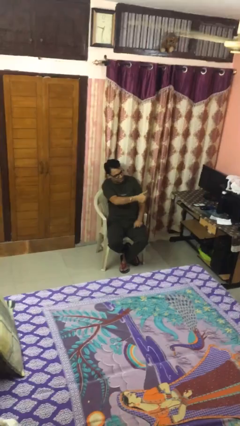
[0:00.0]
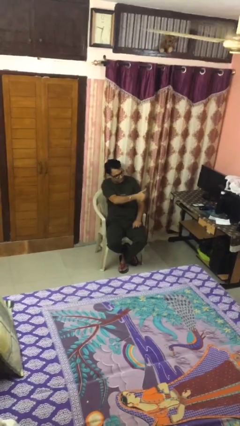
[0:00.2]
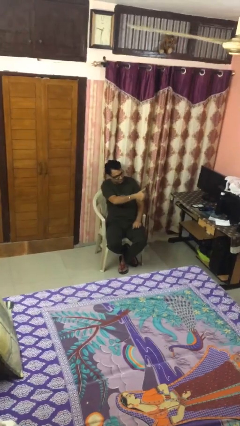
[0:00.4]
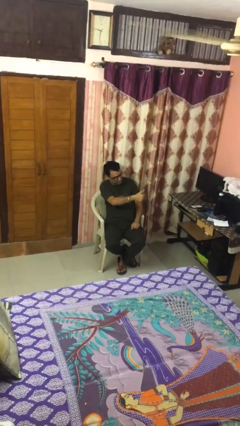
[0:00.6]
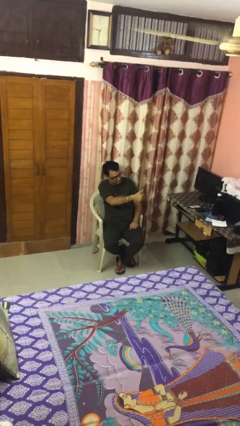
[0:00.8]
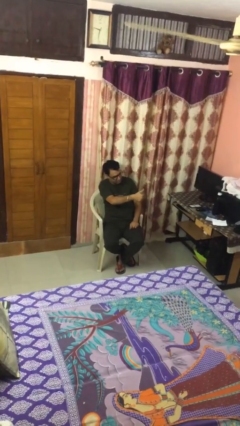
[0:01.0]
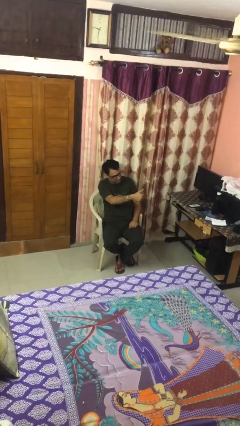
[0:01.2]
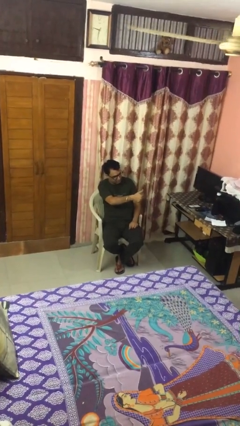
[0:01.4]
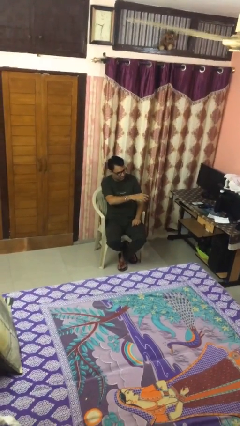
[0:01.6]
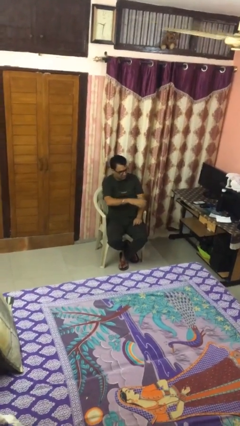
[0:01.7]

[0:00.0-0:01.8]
person gestures thumbs up

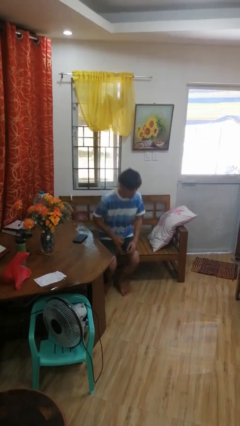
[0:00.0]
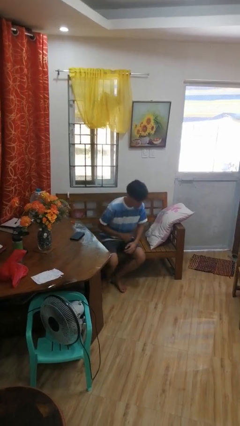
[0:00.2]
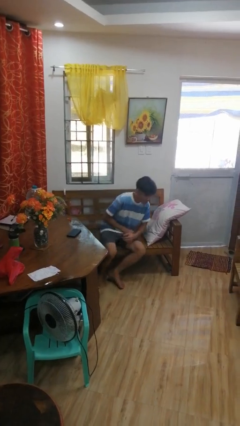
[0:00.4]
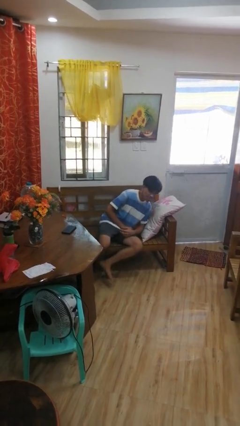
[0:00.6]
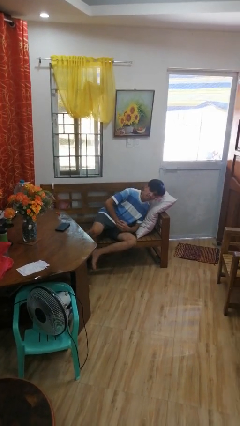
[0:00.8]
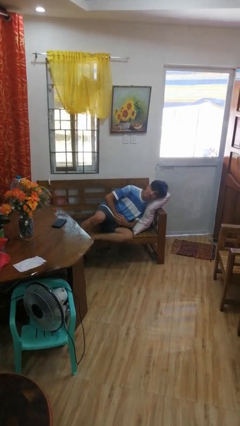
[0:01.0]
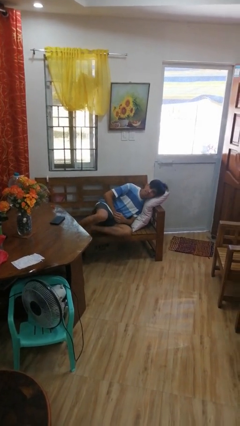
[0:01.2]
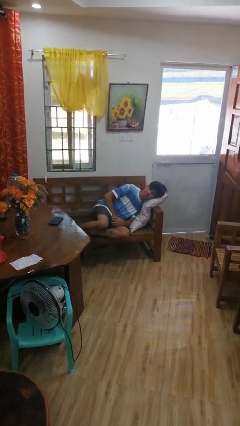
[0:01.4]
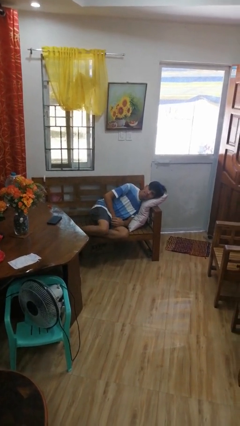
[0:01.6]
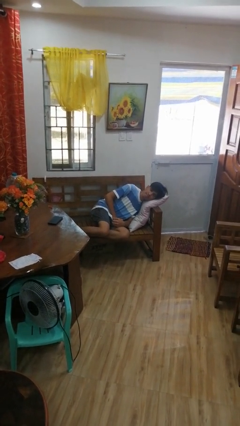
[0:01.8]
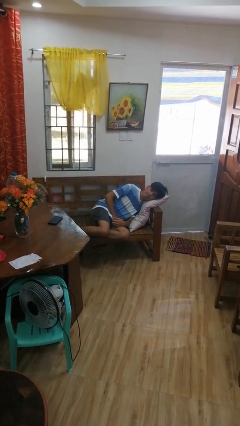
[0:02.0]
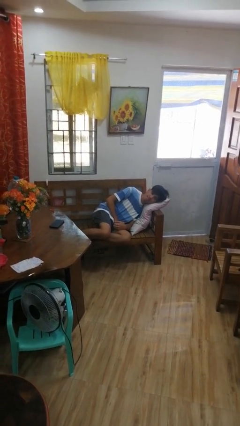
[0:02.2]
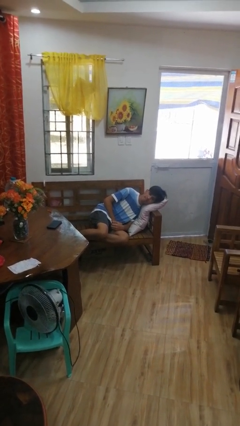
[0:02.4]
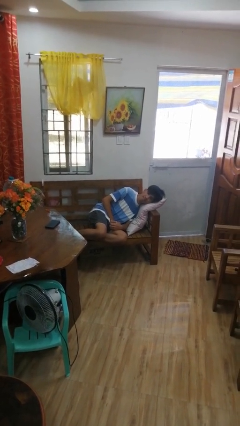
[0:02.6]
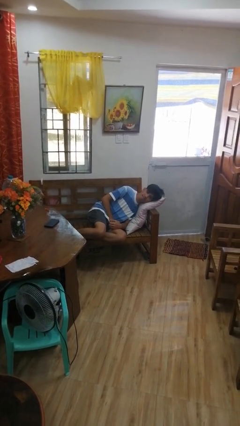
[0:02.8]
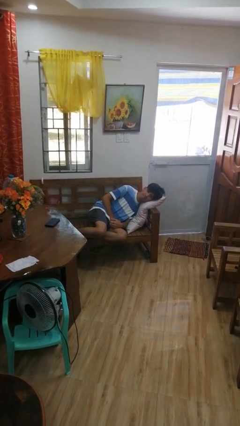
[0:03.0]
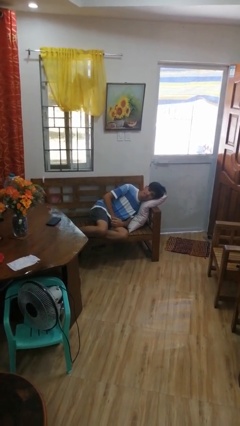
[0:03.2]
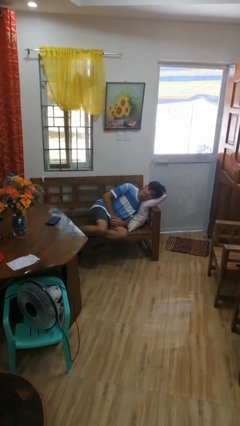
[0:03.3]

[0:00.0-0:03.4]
person lies down on couch

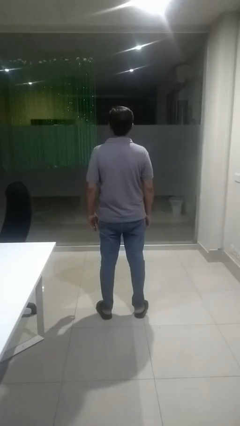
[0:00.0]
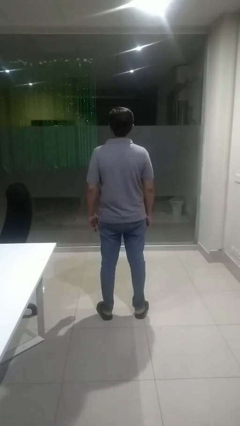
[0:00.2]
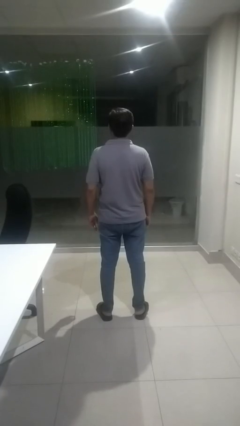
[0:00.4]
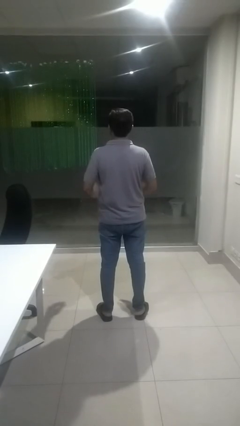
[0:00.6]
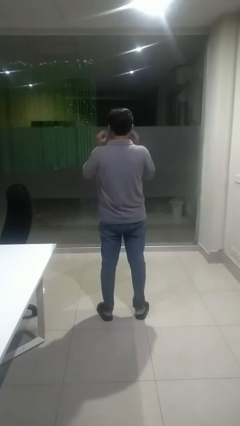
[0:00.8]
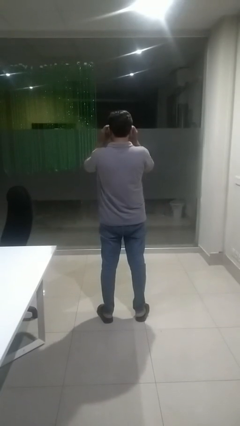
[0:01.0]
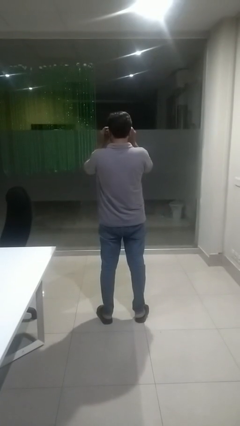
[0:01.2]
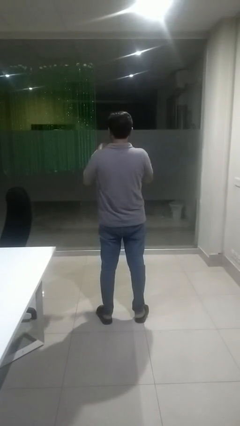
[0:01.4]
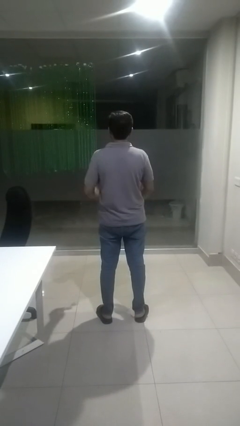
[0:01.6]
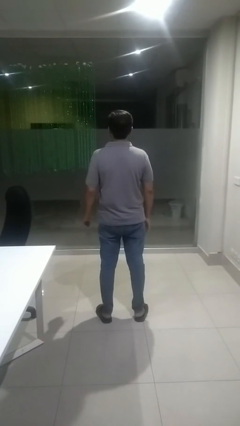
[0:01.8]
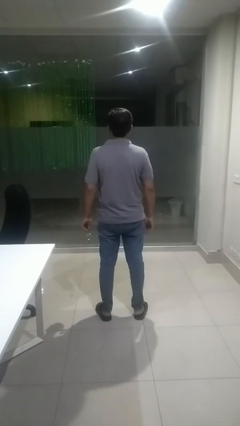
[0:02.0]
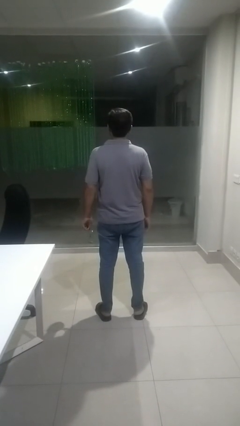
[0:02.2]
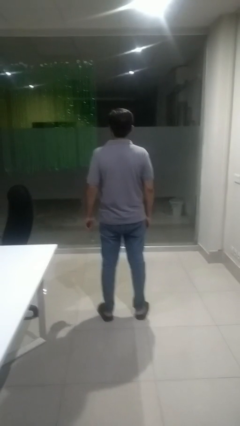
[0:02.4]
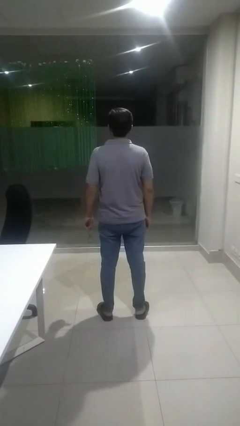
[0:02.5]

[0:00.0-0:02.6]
person takes off glasses

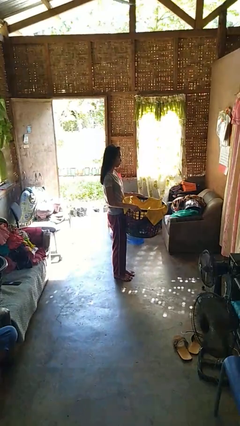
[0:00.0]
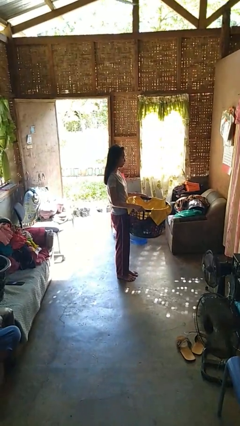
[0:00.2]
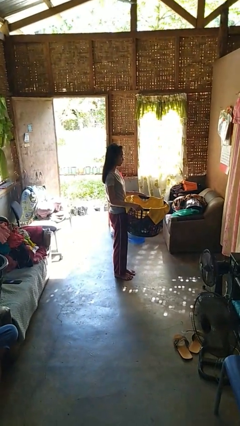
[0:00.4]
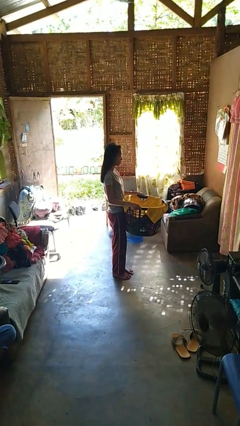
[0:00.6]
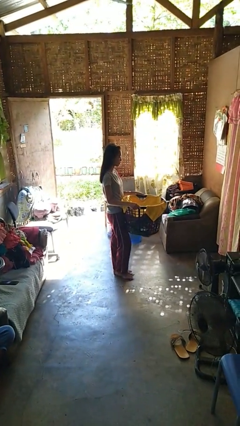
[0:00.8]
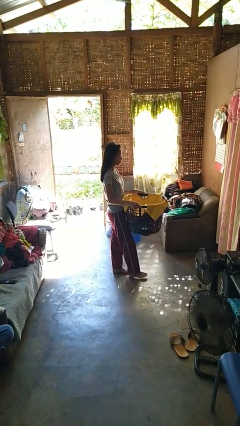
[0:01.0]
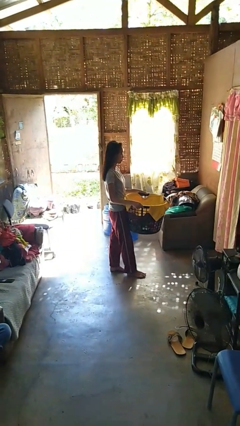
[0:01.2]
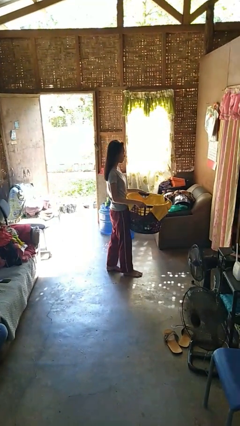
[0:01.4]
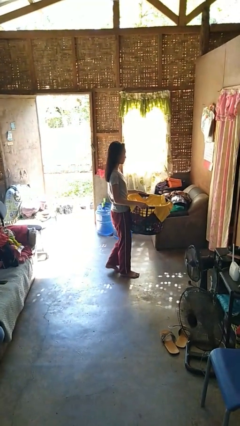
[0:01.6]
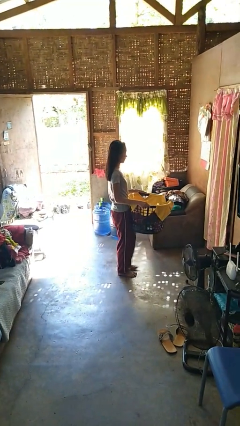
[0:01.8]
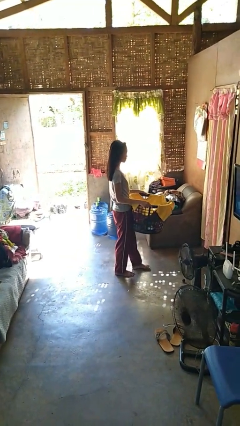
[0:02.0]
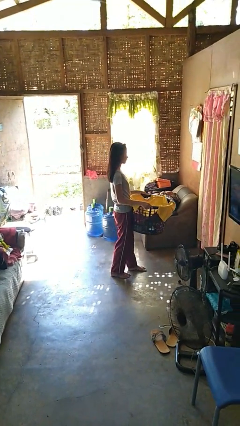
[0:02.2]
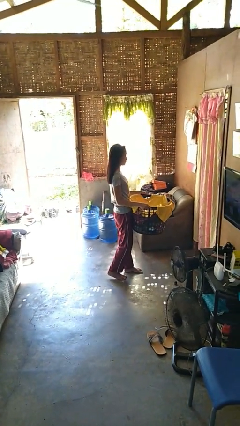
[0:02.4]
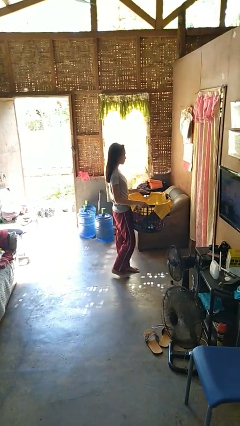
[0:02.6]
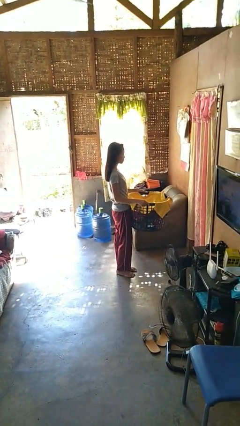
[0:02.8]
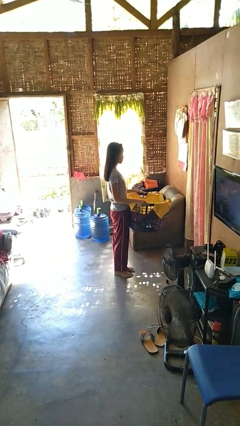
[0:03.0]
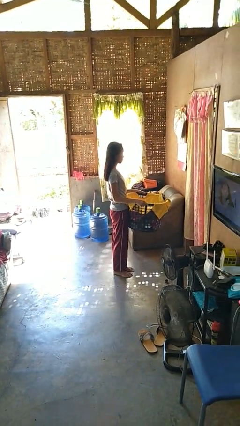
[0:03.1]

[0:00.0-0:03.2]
person carries laundry basket

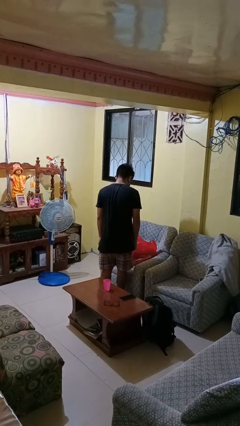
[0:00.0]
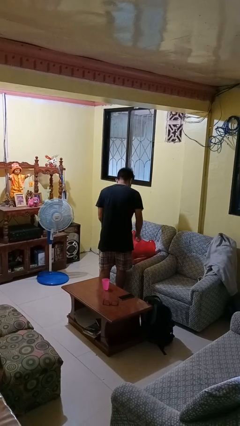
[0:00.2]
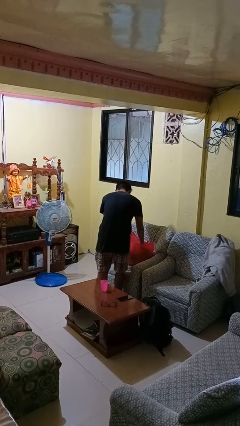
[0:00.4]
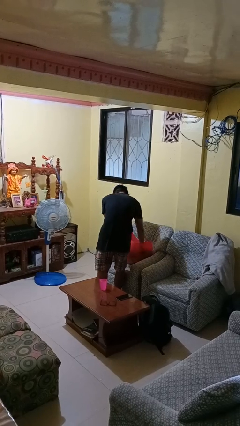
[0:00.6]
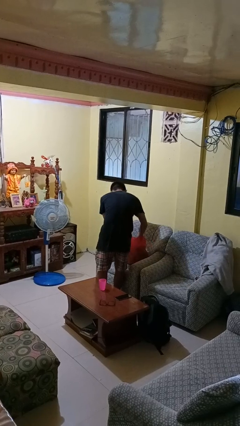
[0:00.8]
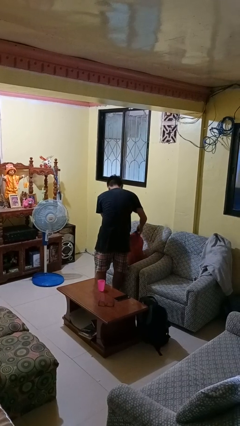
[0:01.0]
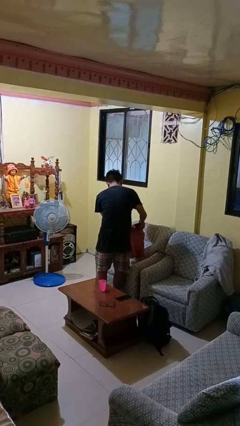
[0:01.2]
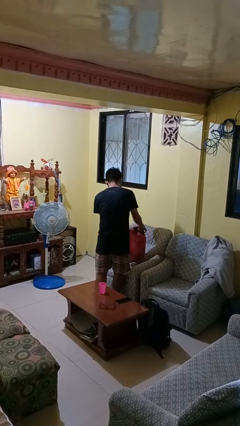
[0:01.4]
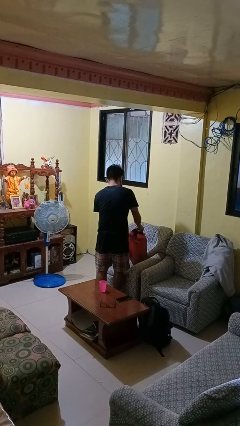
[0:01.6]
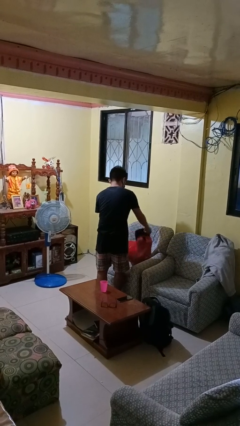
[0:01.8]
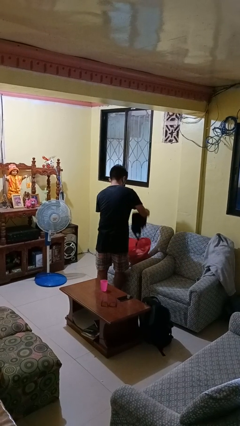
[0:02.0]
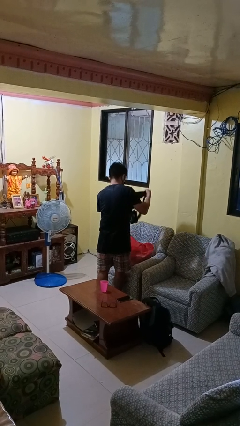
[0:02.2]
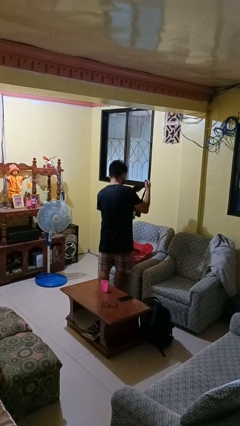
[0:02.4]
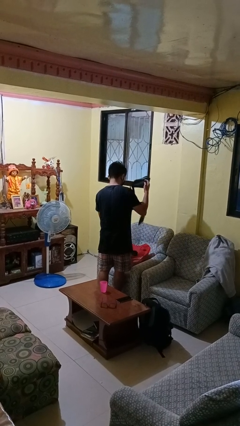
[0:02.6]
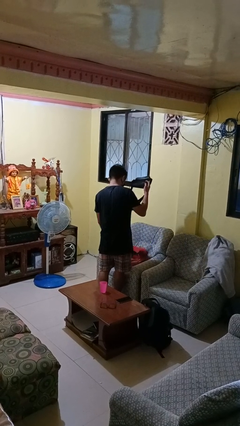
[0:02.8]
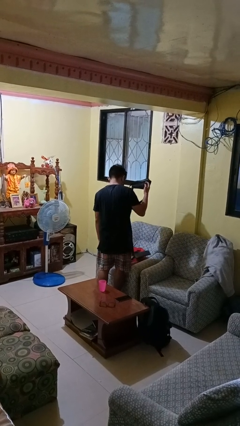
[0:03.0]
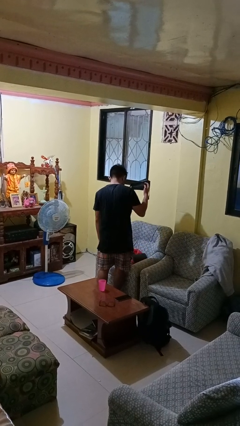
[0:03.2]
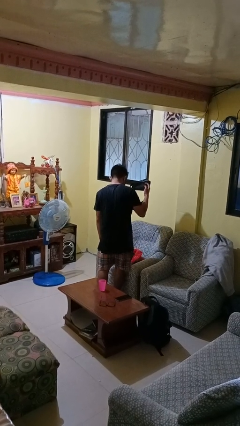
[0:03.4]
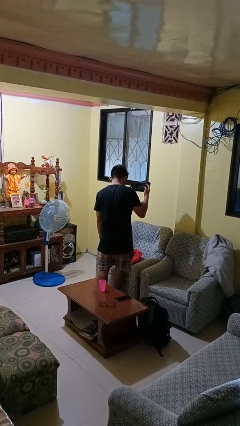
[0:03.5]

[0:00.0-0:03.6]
person takes object from bag

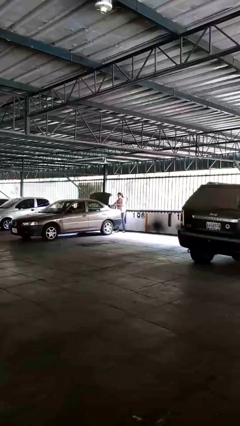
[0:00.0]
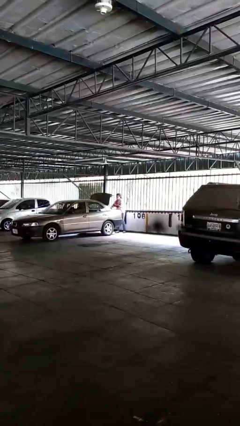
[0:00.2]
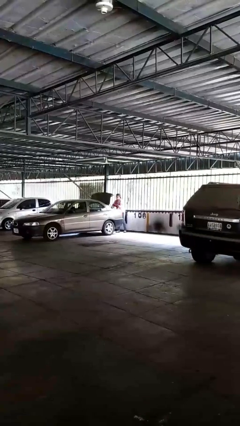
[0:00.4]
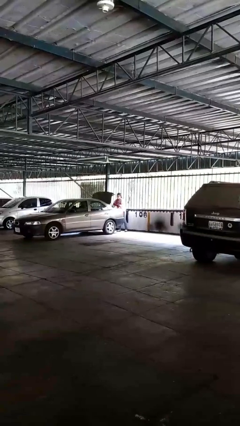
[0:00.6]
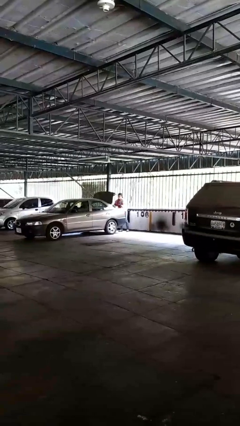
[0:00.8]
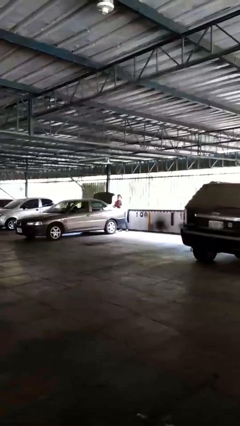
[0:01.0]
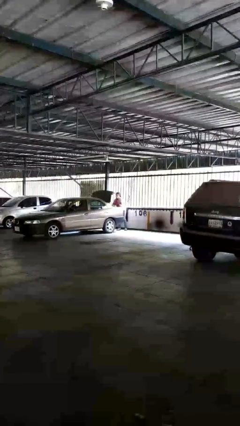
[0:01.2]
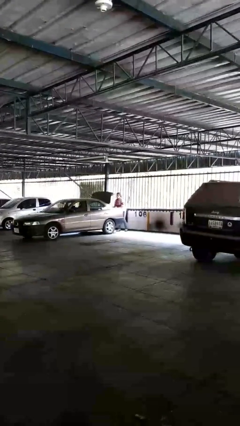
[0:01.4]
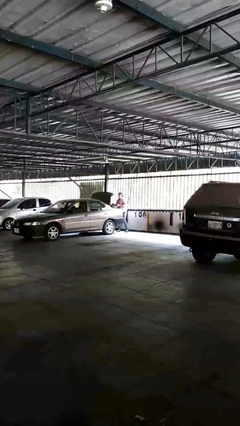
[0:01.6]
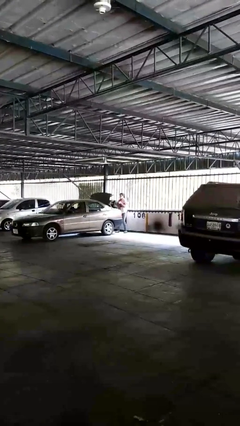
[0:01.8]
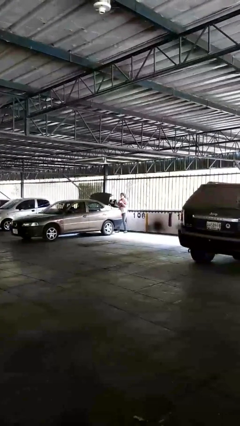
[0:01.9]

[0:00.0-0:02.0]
person loads car

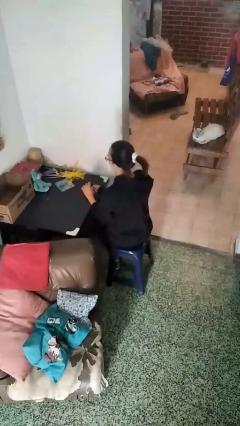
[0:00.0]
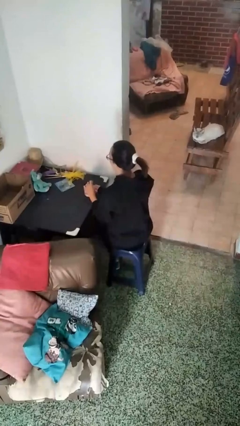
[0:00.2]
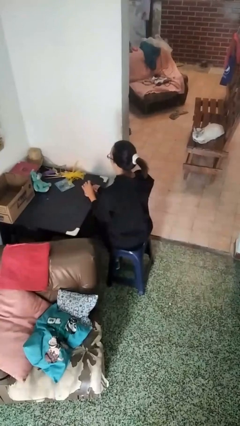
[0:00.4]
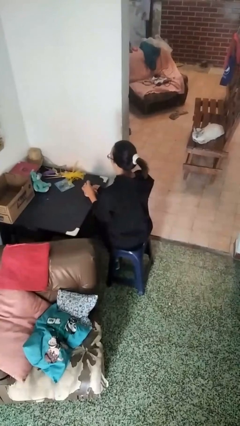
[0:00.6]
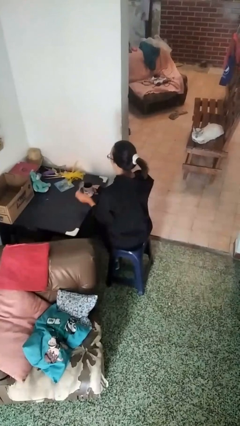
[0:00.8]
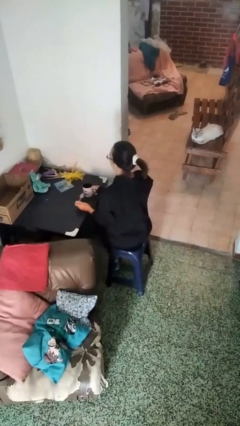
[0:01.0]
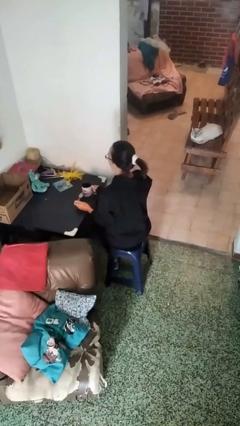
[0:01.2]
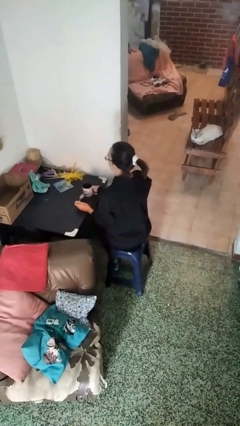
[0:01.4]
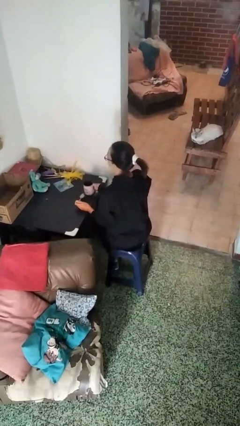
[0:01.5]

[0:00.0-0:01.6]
person stirs mug
